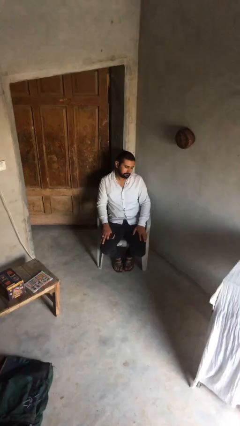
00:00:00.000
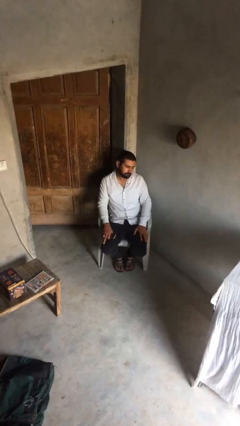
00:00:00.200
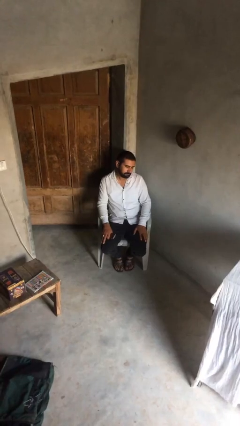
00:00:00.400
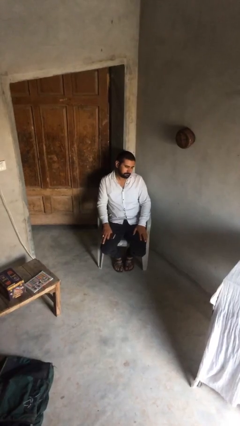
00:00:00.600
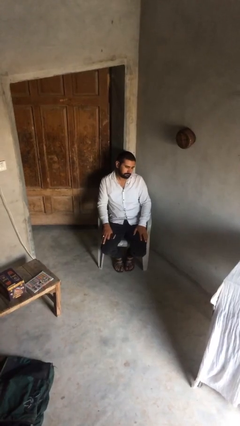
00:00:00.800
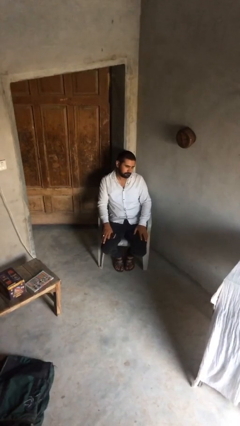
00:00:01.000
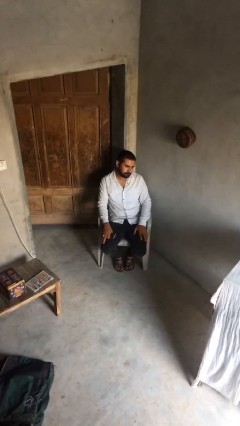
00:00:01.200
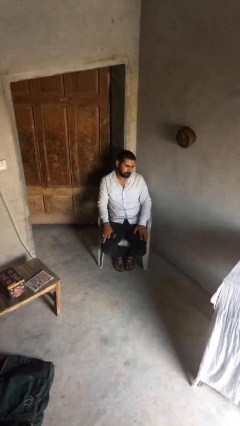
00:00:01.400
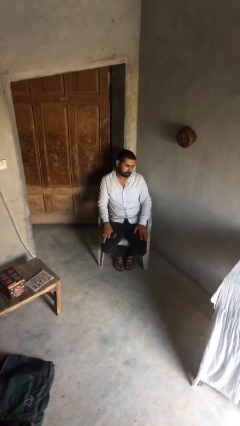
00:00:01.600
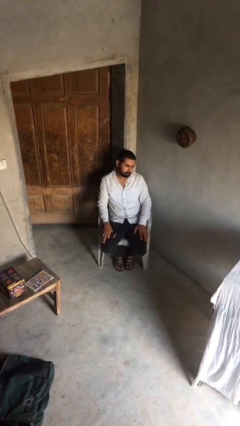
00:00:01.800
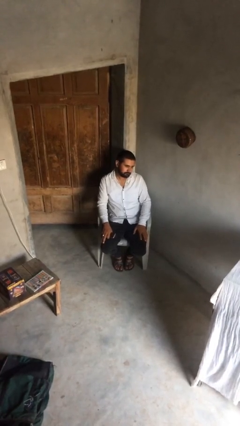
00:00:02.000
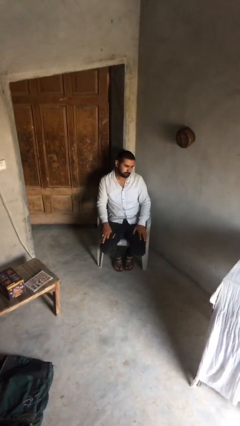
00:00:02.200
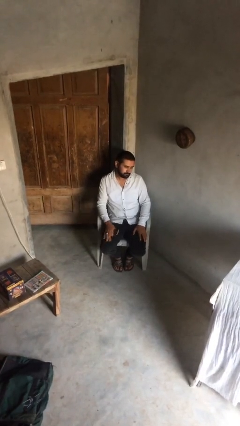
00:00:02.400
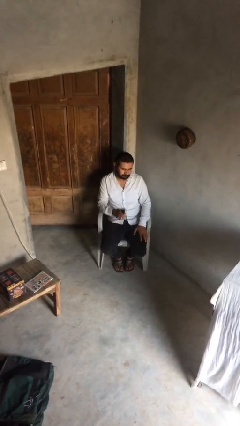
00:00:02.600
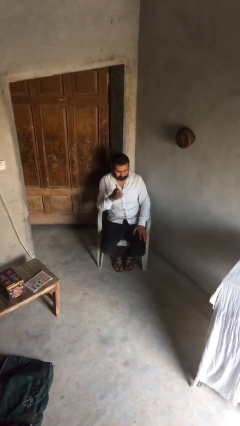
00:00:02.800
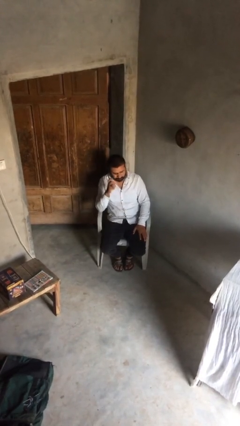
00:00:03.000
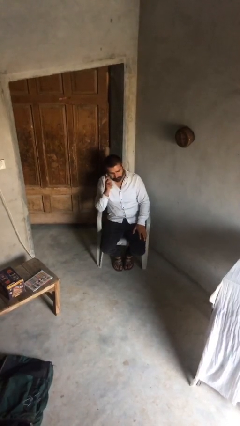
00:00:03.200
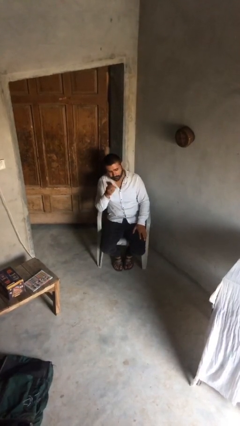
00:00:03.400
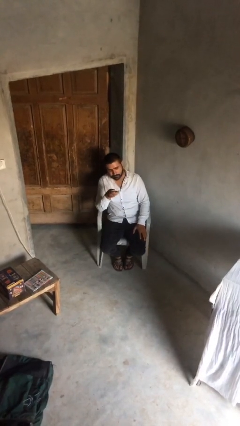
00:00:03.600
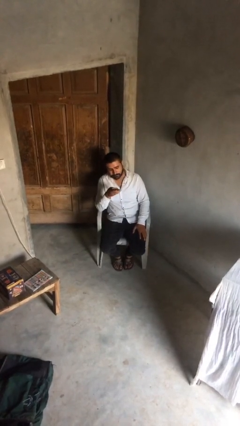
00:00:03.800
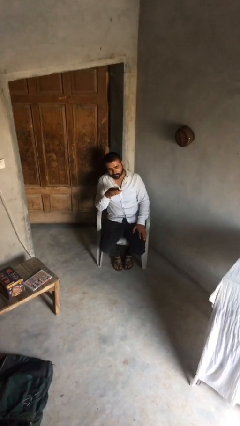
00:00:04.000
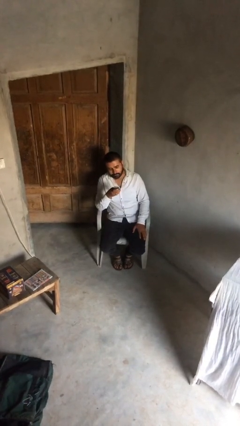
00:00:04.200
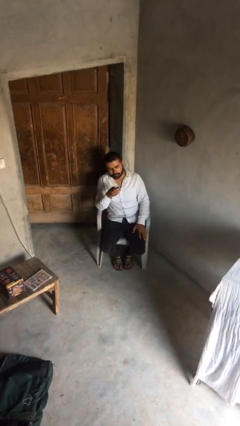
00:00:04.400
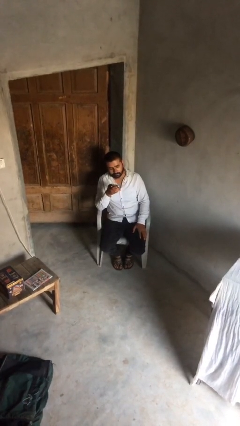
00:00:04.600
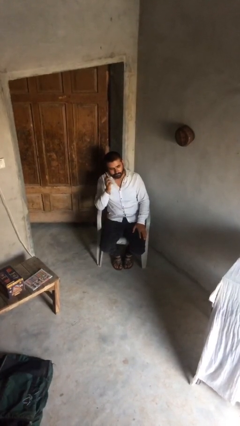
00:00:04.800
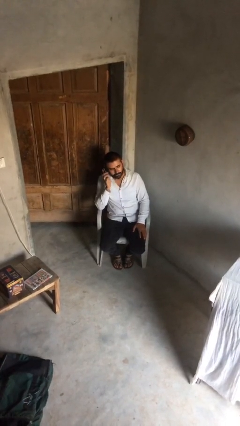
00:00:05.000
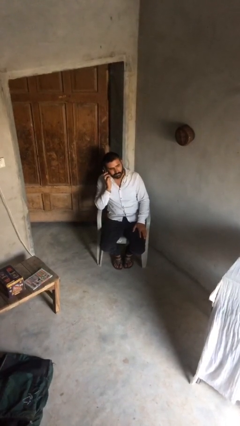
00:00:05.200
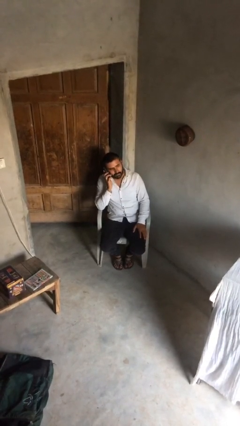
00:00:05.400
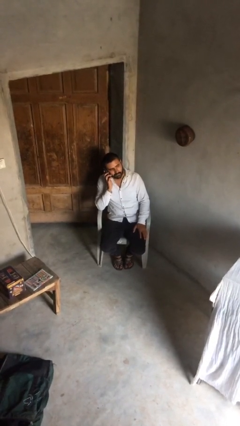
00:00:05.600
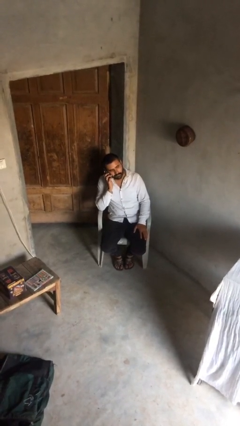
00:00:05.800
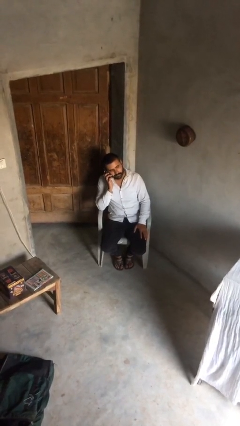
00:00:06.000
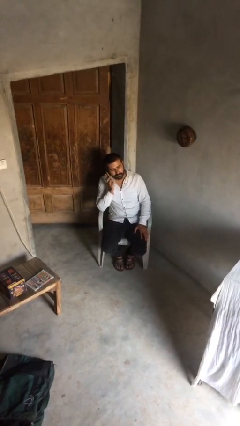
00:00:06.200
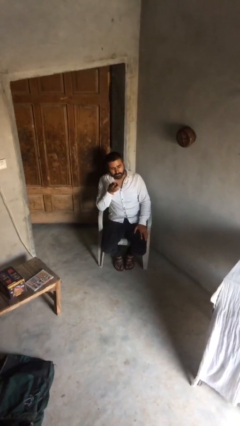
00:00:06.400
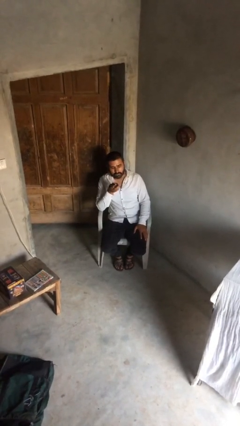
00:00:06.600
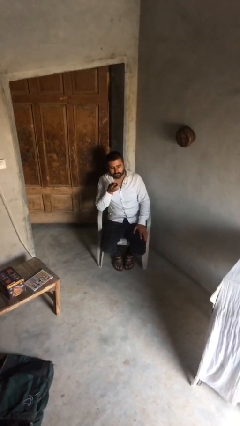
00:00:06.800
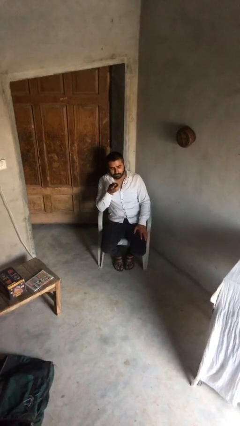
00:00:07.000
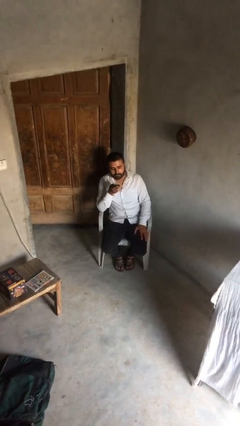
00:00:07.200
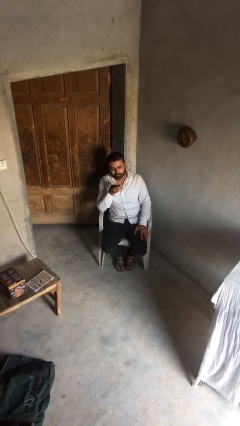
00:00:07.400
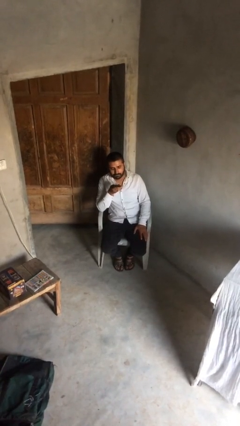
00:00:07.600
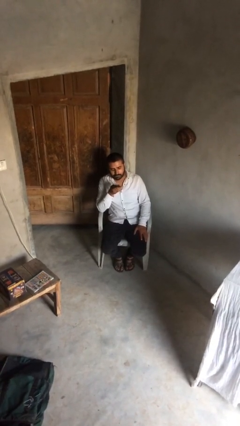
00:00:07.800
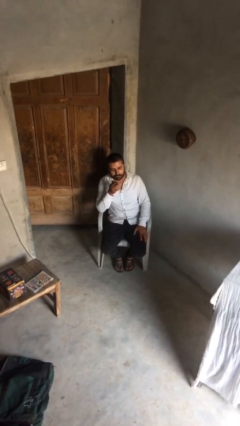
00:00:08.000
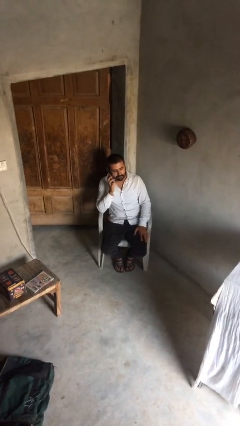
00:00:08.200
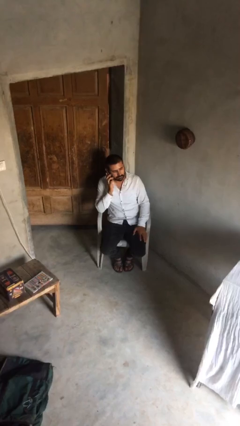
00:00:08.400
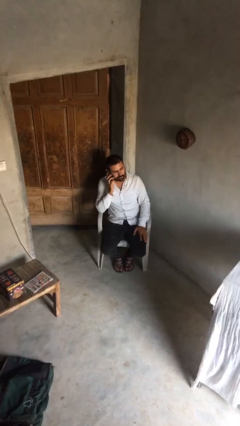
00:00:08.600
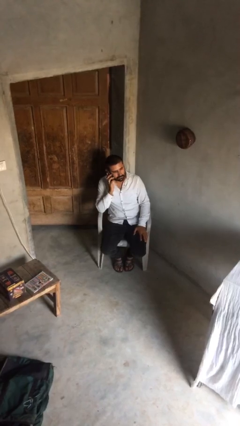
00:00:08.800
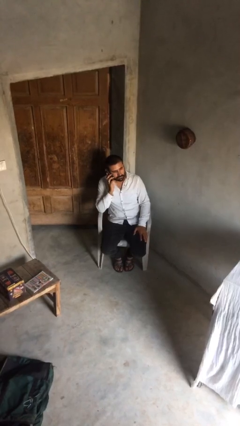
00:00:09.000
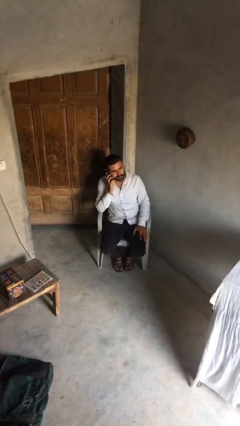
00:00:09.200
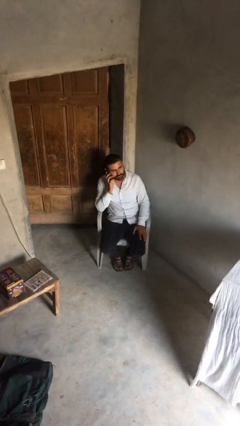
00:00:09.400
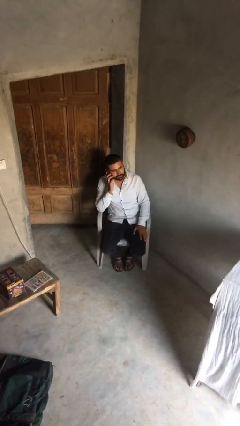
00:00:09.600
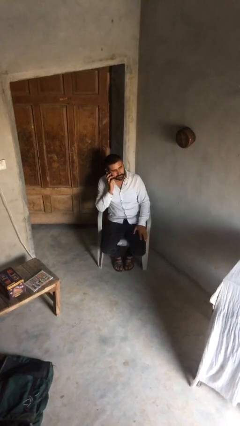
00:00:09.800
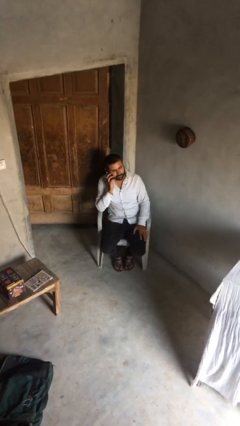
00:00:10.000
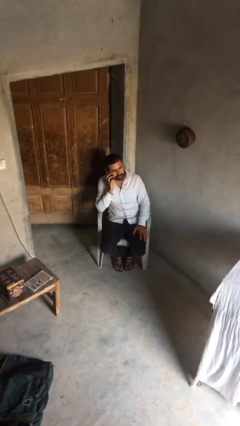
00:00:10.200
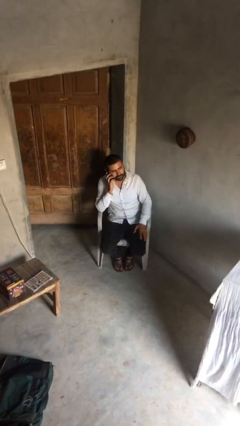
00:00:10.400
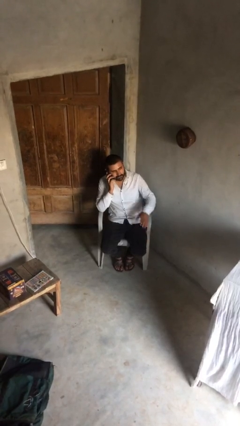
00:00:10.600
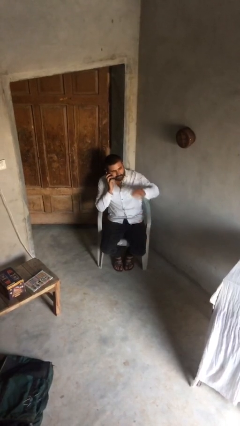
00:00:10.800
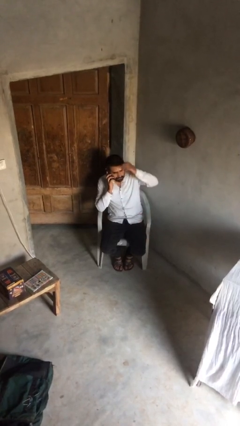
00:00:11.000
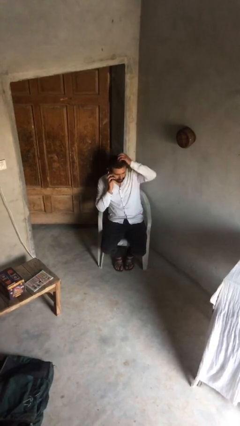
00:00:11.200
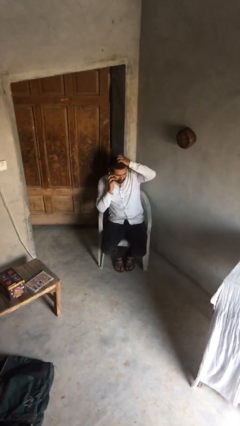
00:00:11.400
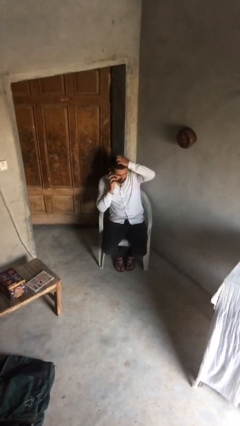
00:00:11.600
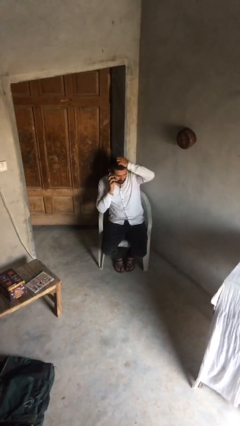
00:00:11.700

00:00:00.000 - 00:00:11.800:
person talks on phone

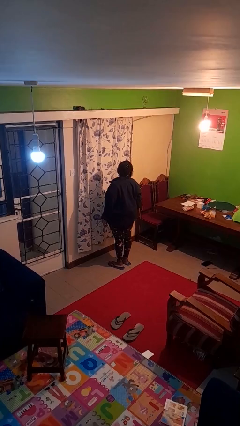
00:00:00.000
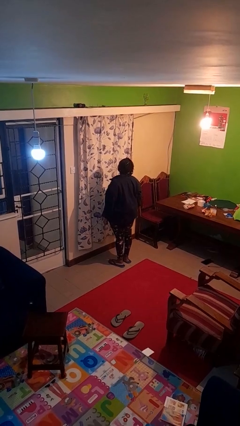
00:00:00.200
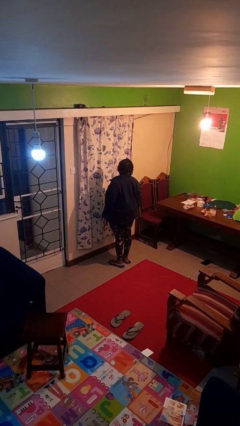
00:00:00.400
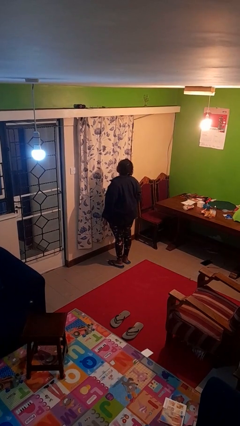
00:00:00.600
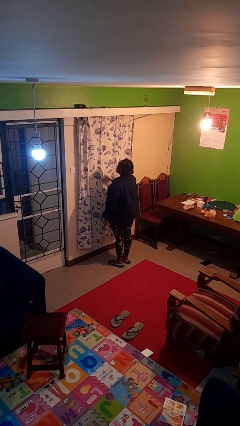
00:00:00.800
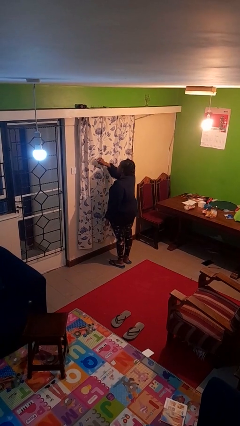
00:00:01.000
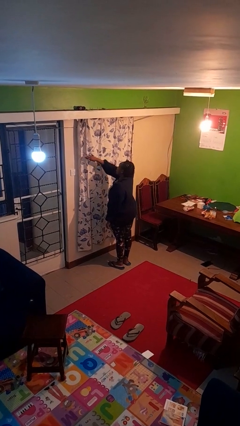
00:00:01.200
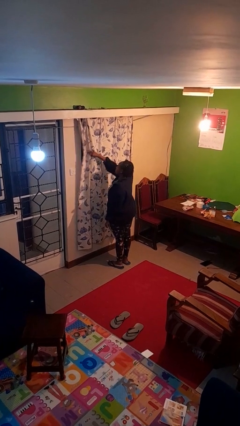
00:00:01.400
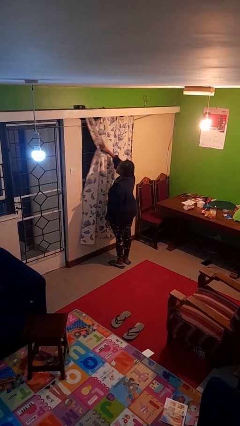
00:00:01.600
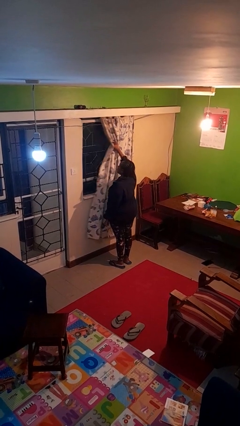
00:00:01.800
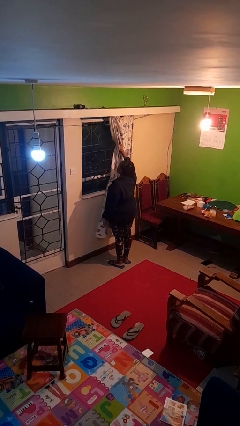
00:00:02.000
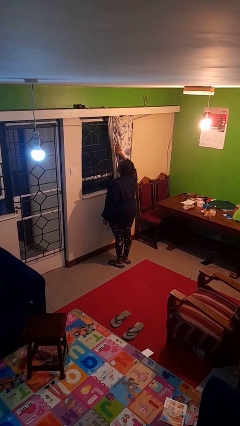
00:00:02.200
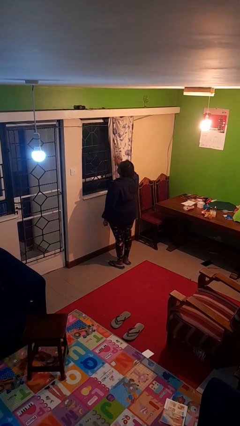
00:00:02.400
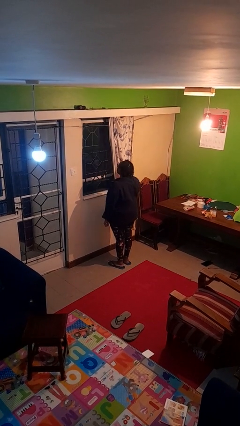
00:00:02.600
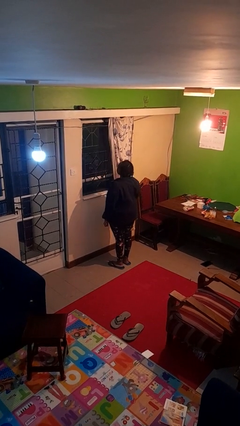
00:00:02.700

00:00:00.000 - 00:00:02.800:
person opens curtains

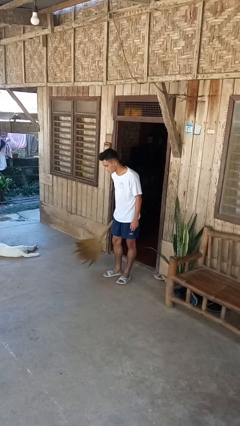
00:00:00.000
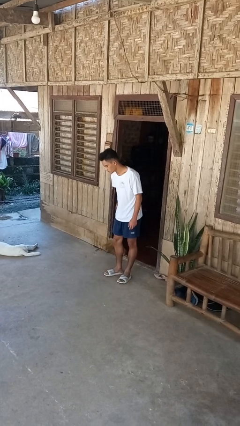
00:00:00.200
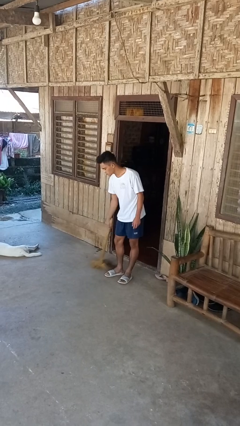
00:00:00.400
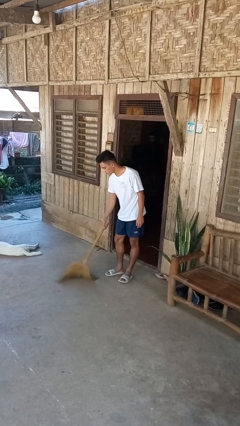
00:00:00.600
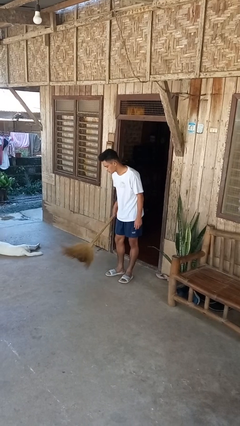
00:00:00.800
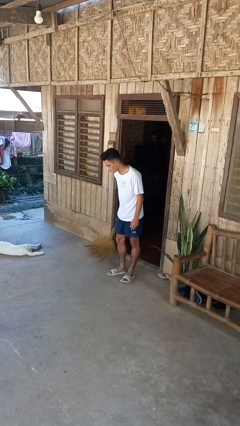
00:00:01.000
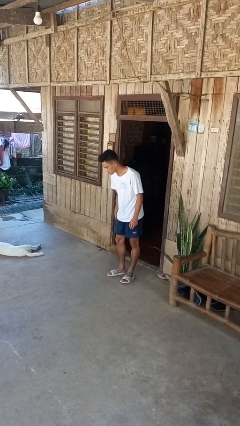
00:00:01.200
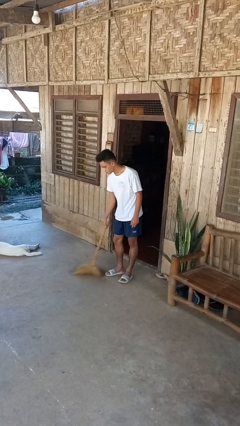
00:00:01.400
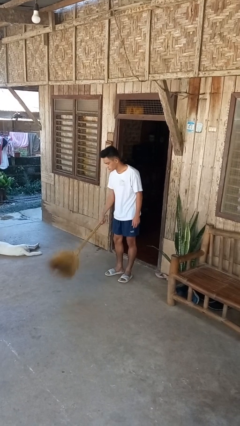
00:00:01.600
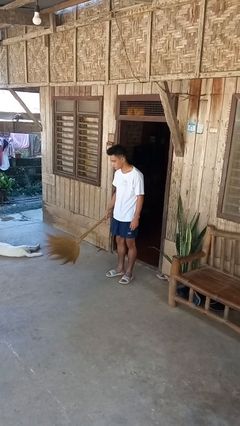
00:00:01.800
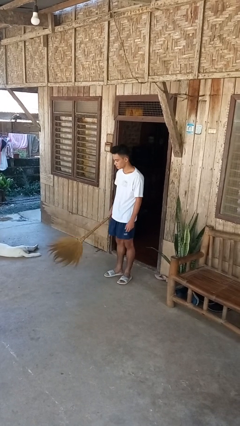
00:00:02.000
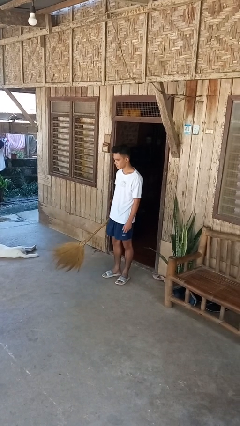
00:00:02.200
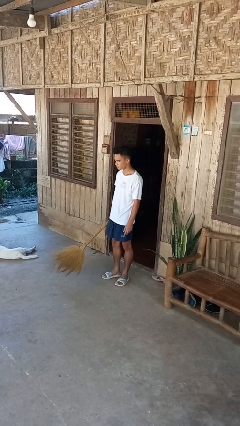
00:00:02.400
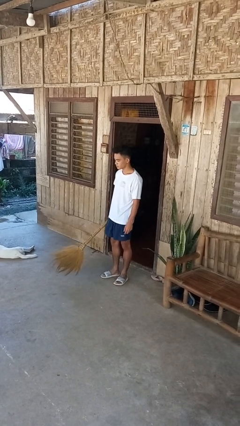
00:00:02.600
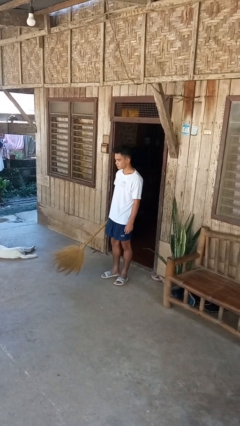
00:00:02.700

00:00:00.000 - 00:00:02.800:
person sweeps floor

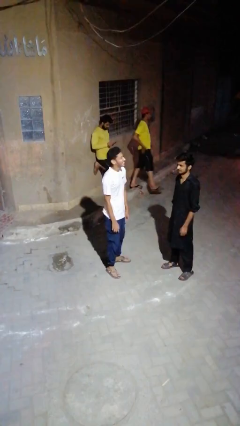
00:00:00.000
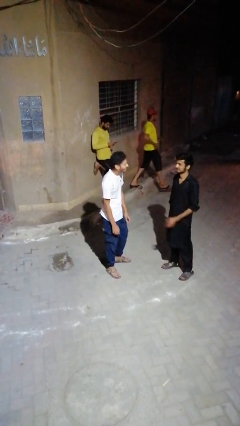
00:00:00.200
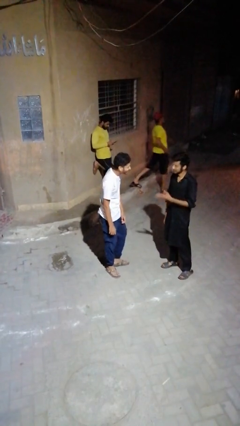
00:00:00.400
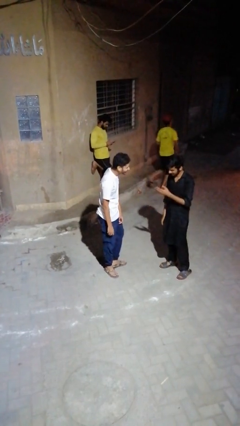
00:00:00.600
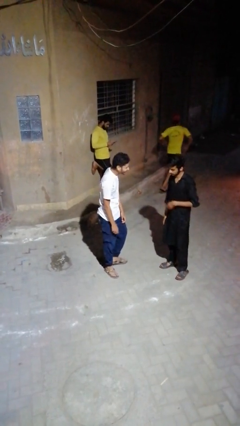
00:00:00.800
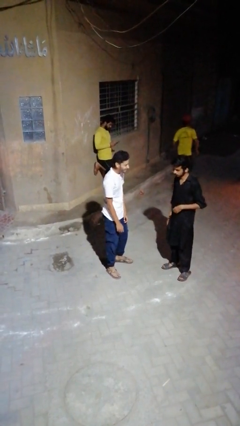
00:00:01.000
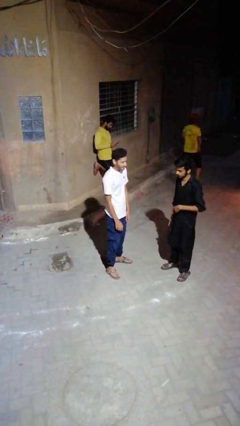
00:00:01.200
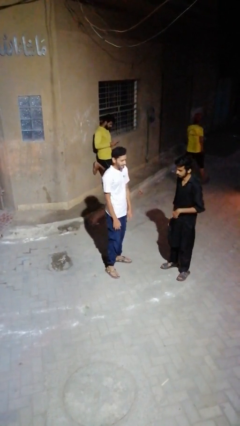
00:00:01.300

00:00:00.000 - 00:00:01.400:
person laughs with person
